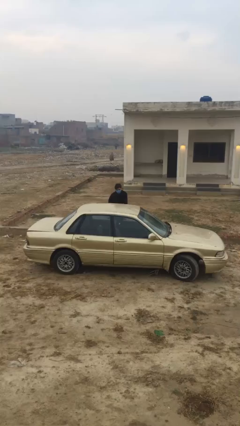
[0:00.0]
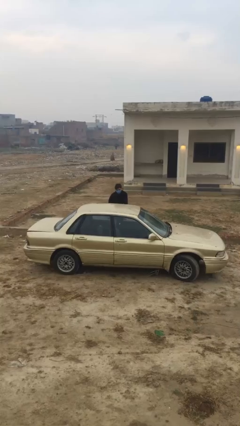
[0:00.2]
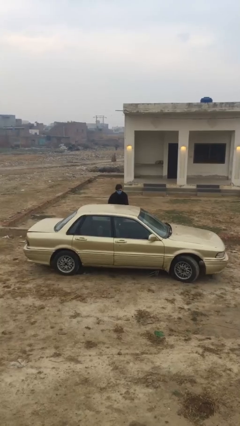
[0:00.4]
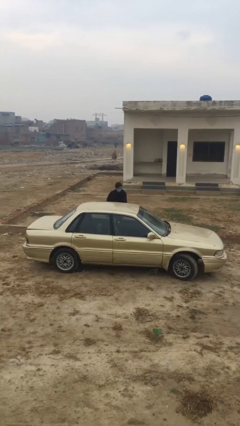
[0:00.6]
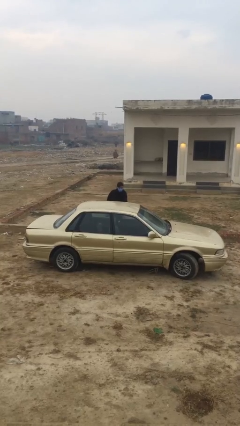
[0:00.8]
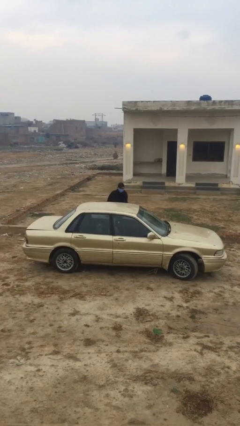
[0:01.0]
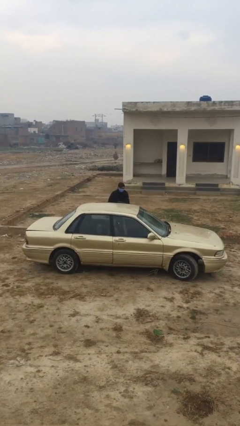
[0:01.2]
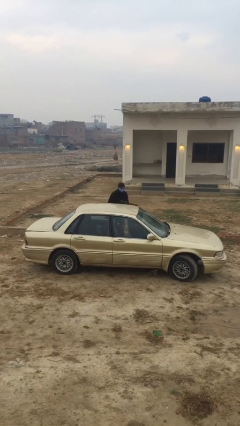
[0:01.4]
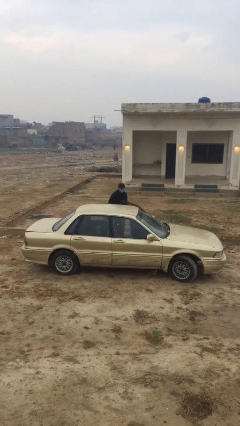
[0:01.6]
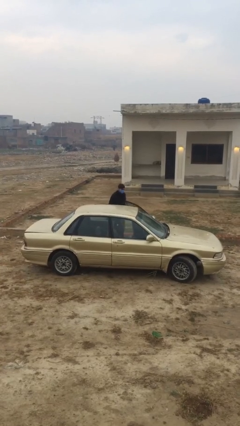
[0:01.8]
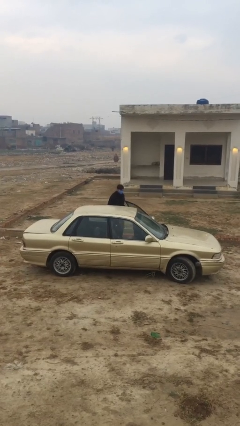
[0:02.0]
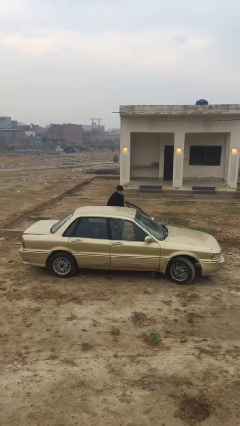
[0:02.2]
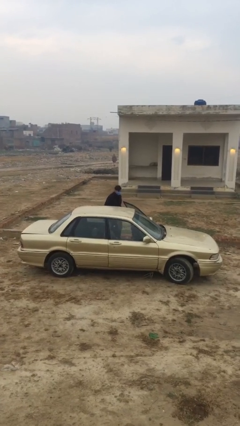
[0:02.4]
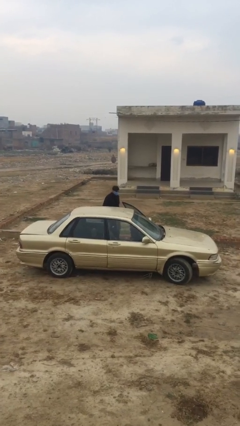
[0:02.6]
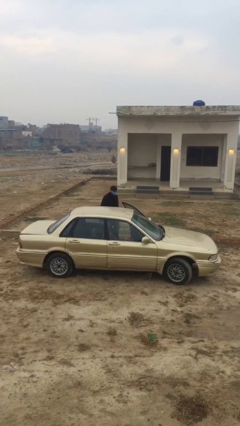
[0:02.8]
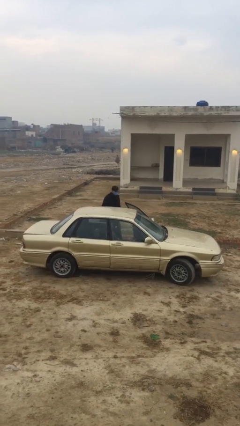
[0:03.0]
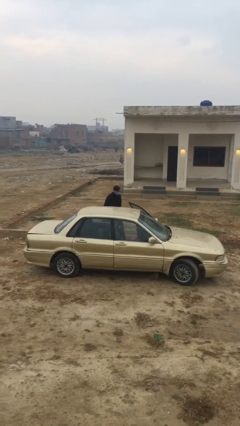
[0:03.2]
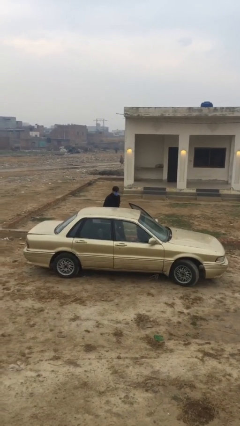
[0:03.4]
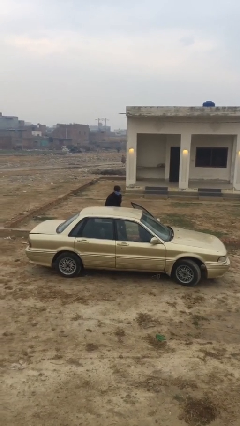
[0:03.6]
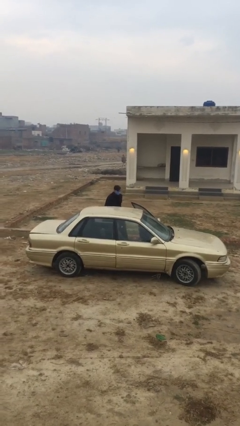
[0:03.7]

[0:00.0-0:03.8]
person opens car door

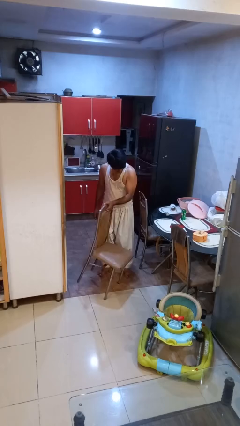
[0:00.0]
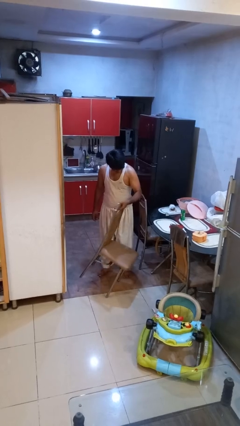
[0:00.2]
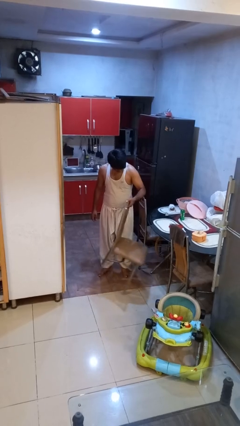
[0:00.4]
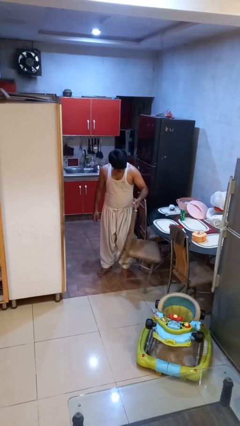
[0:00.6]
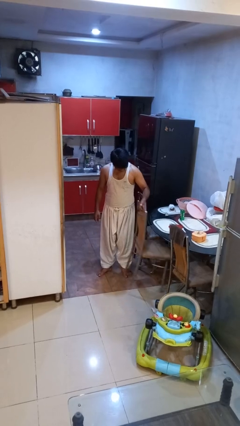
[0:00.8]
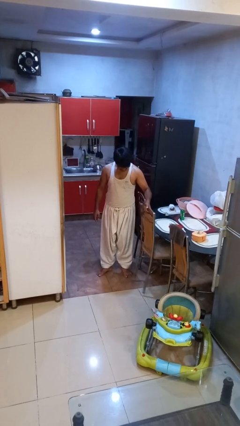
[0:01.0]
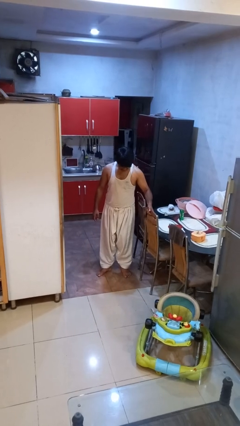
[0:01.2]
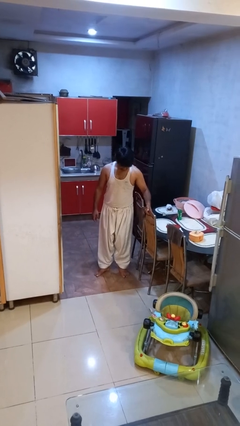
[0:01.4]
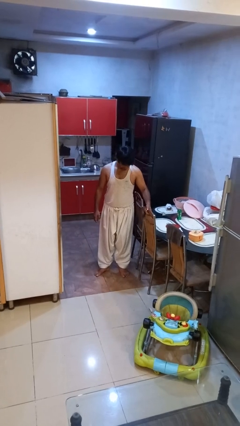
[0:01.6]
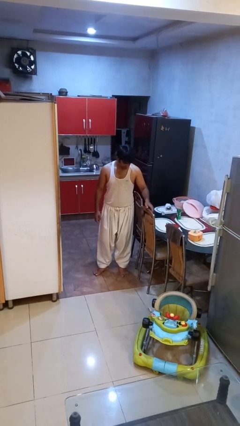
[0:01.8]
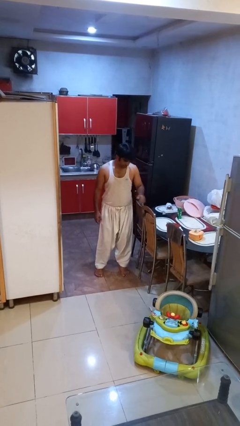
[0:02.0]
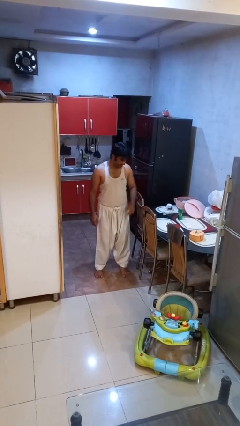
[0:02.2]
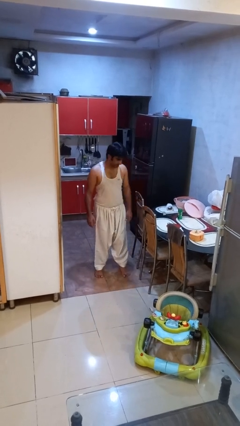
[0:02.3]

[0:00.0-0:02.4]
person pushes in chair

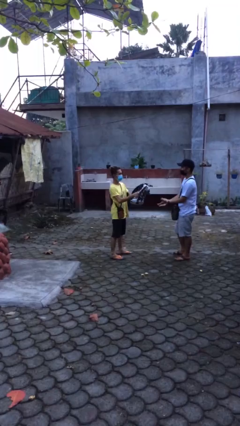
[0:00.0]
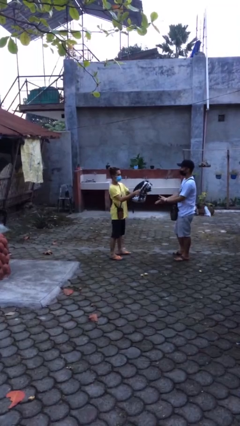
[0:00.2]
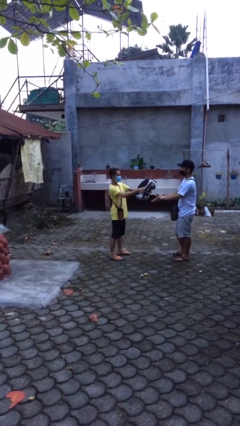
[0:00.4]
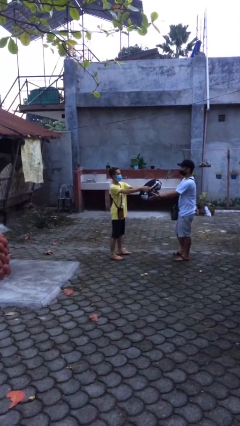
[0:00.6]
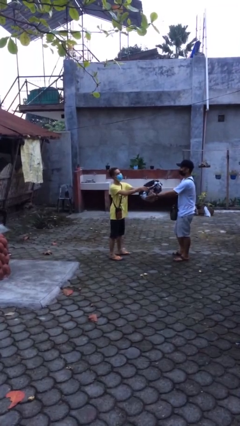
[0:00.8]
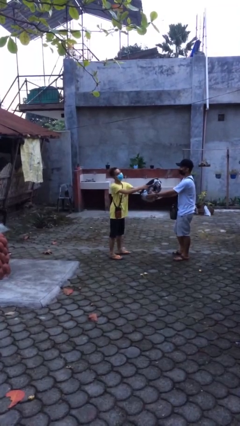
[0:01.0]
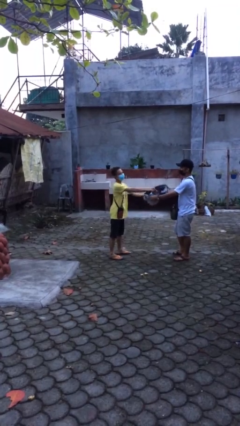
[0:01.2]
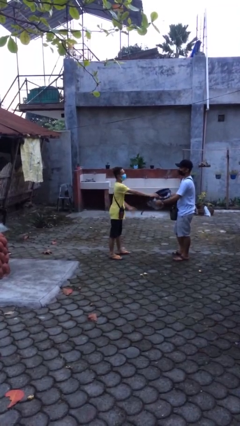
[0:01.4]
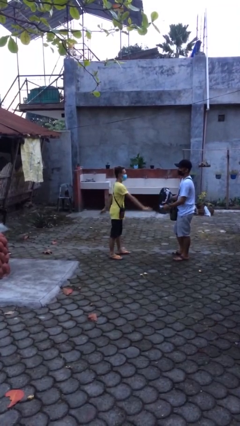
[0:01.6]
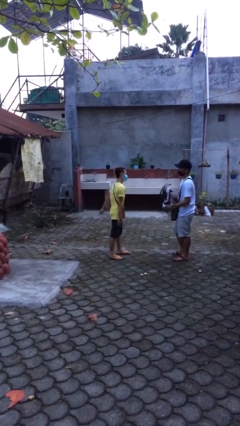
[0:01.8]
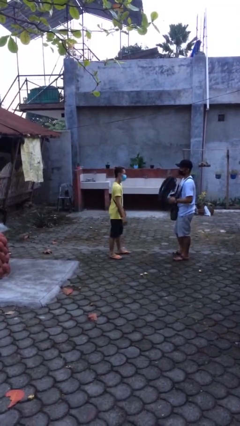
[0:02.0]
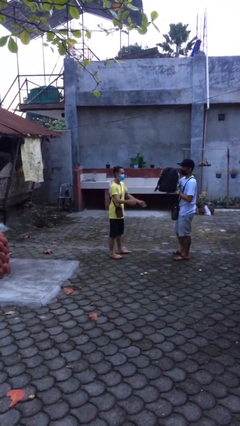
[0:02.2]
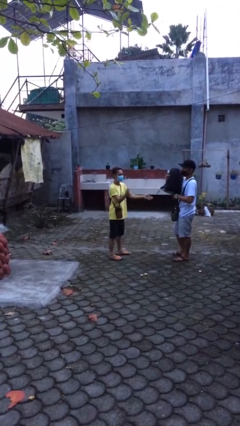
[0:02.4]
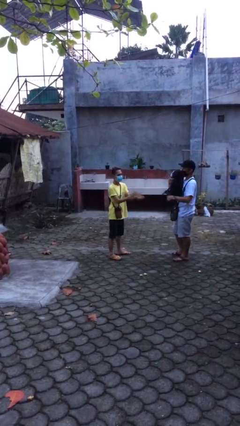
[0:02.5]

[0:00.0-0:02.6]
person transfers object to person

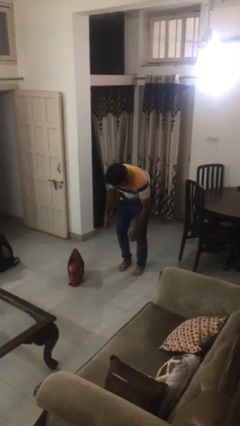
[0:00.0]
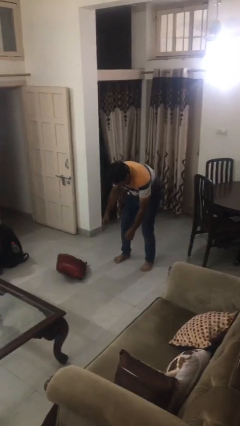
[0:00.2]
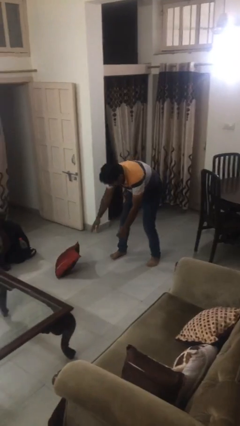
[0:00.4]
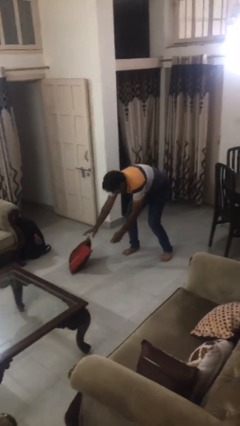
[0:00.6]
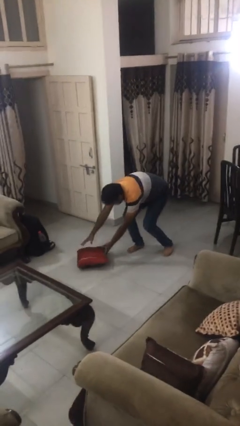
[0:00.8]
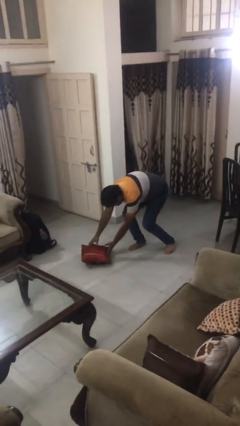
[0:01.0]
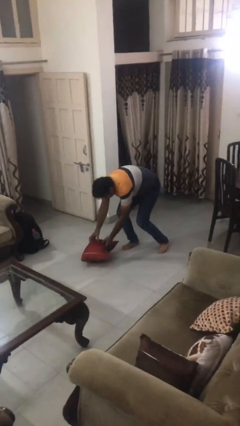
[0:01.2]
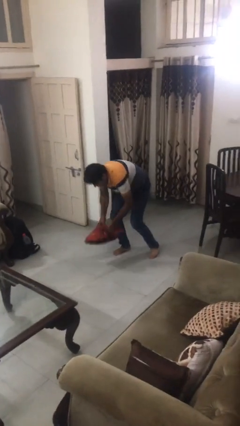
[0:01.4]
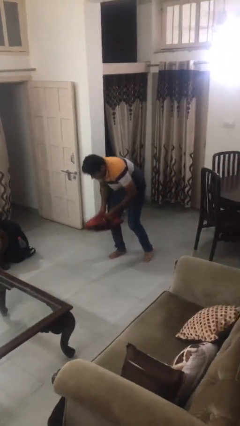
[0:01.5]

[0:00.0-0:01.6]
person picks up object from floor

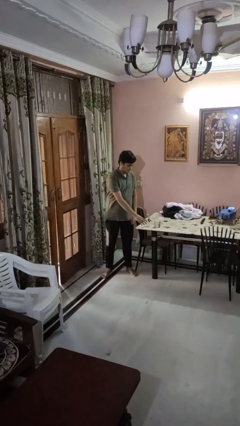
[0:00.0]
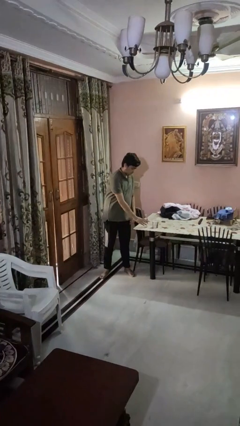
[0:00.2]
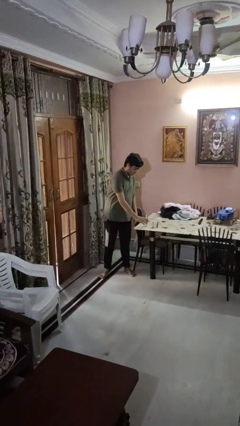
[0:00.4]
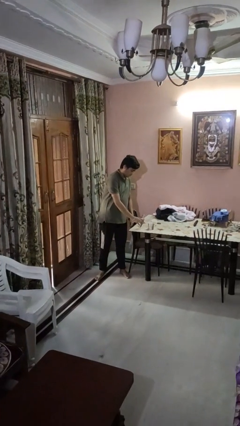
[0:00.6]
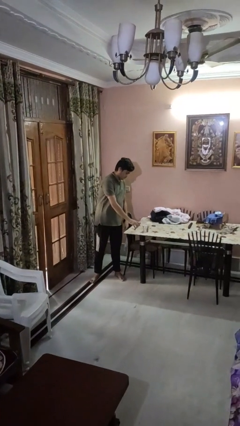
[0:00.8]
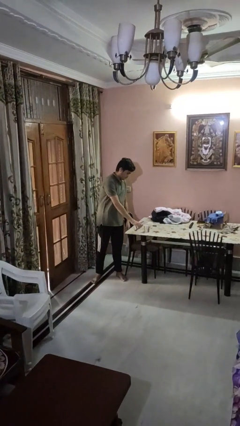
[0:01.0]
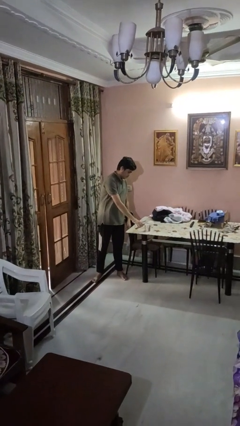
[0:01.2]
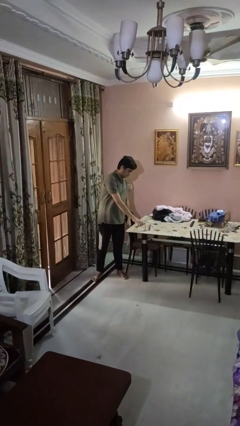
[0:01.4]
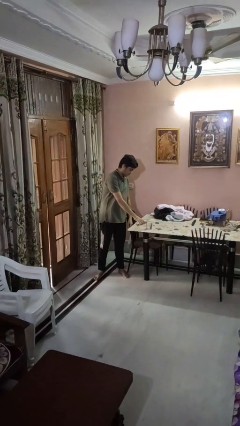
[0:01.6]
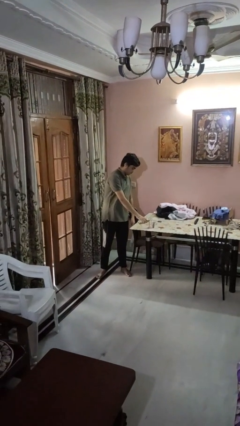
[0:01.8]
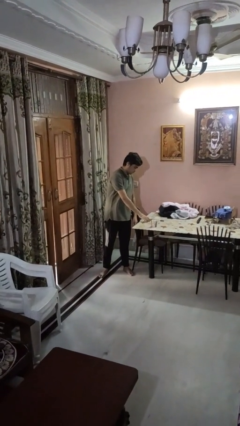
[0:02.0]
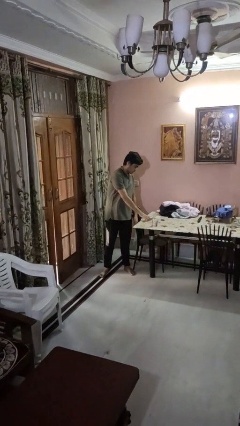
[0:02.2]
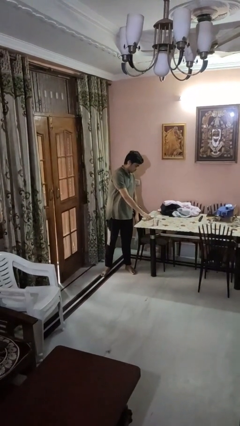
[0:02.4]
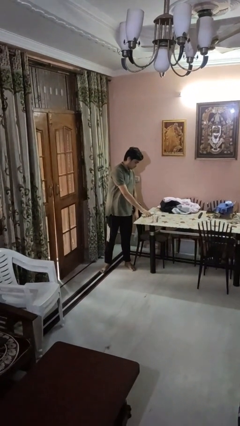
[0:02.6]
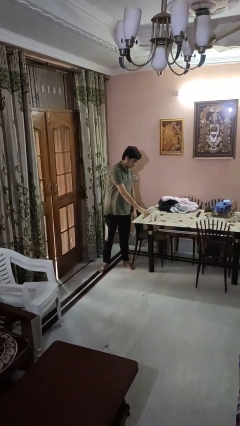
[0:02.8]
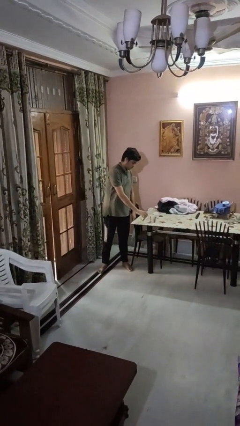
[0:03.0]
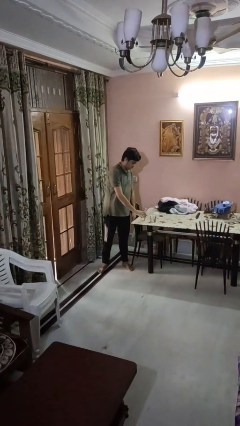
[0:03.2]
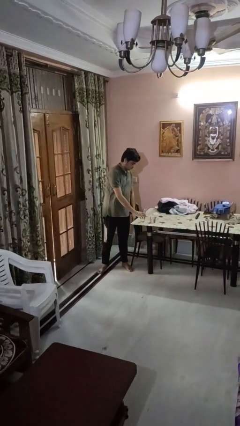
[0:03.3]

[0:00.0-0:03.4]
person pours liquid into cup

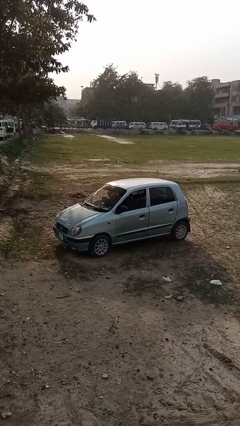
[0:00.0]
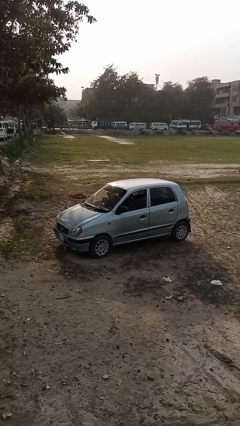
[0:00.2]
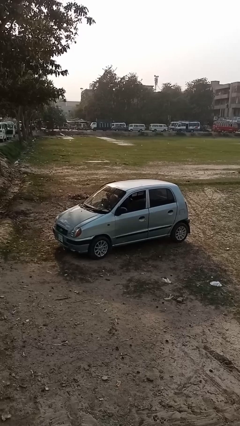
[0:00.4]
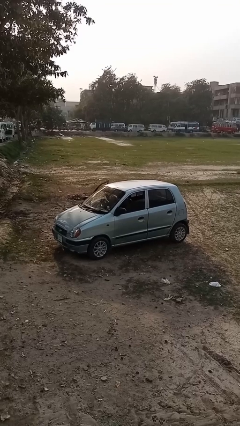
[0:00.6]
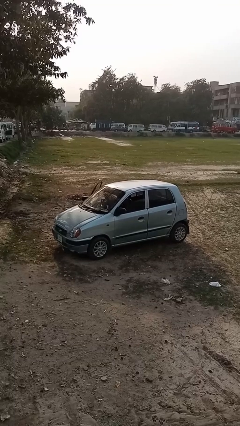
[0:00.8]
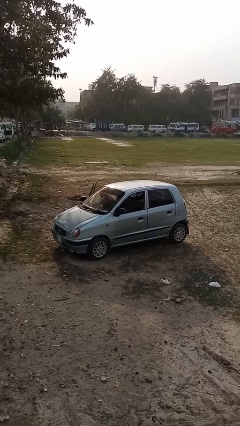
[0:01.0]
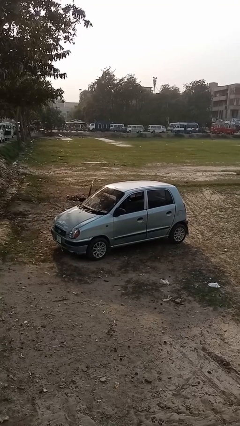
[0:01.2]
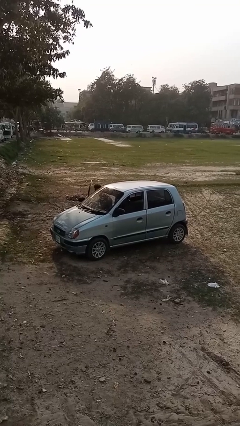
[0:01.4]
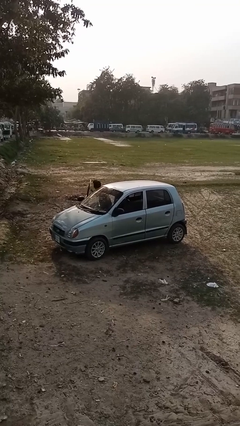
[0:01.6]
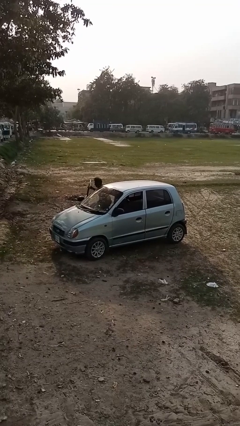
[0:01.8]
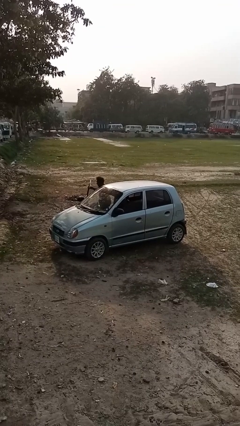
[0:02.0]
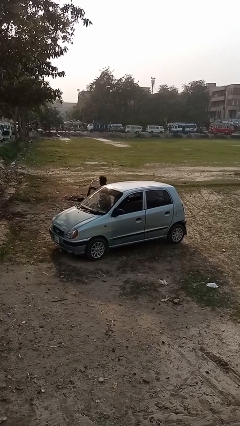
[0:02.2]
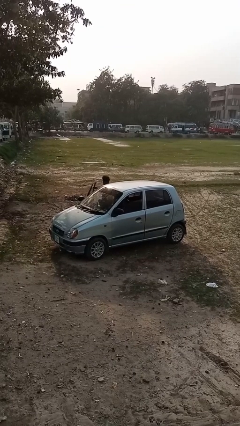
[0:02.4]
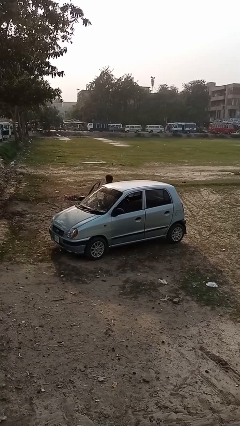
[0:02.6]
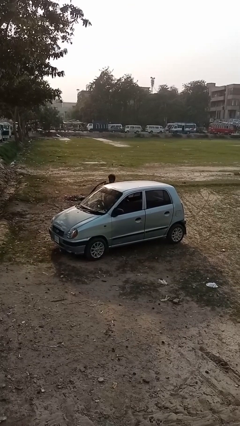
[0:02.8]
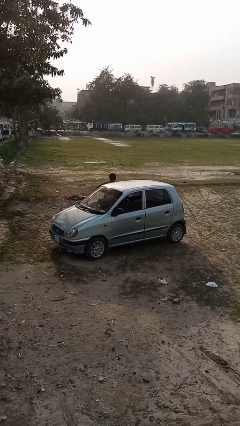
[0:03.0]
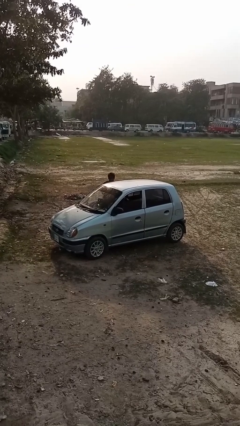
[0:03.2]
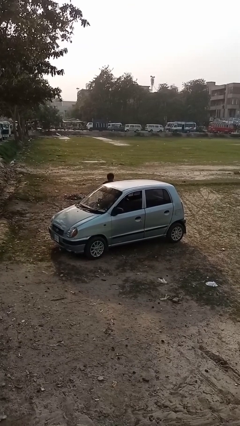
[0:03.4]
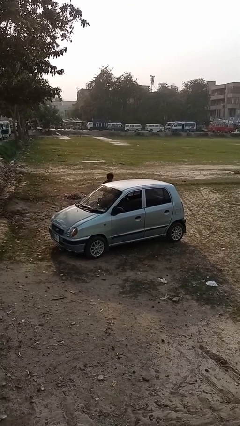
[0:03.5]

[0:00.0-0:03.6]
car drops off person

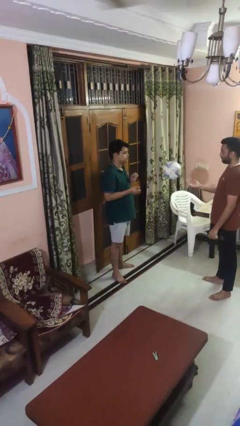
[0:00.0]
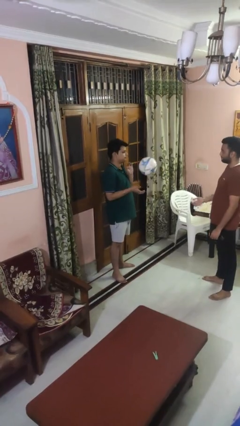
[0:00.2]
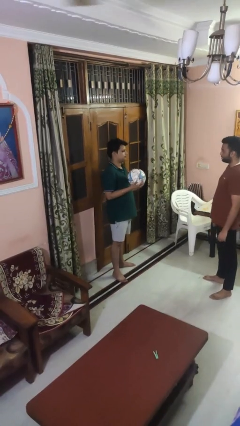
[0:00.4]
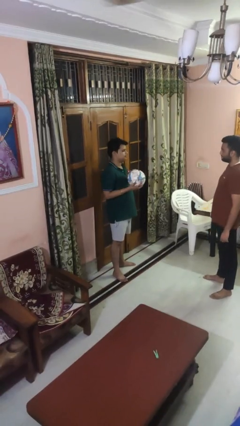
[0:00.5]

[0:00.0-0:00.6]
person catches object from person
